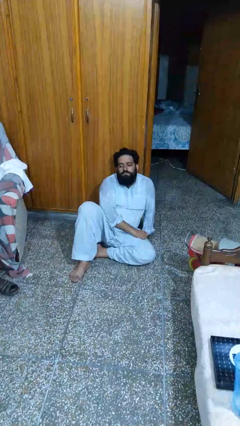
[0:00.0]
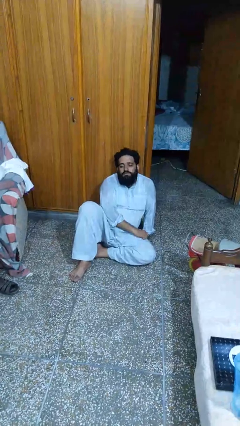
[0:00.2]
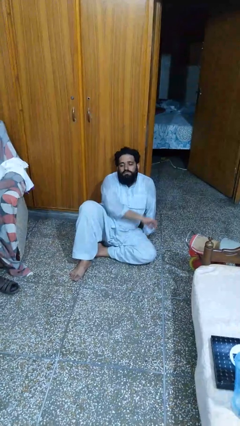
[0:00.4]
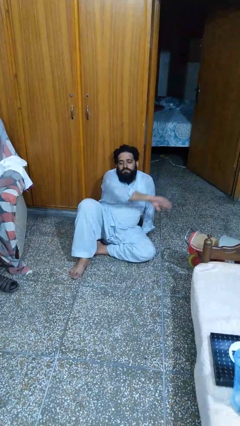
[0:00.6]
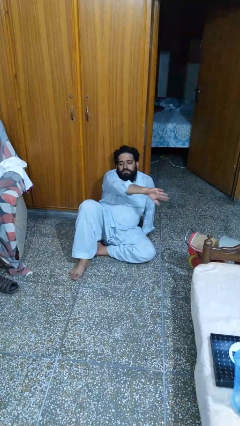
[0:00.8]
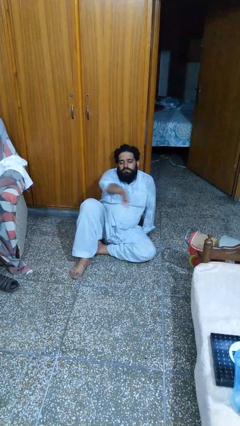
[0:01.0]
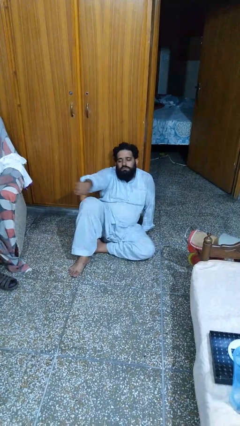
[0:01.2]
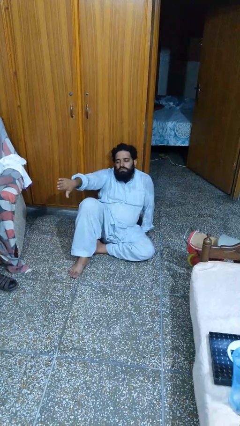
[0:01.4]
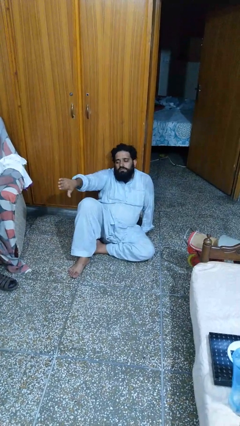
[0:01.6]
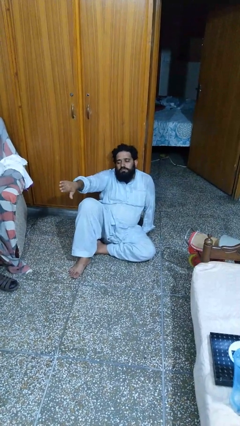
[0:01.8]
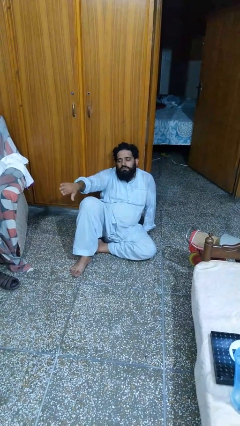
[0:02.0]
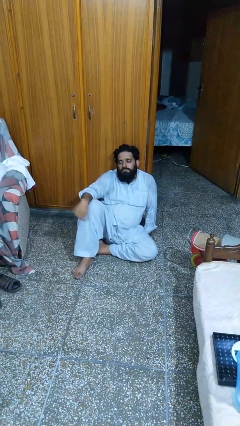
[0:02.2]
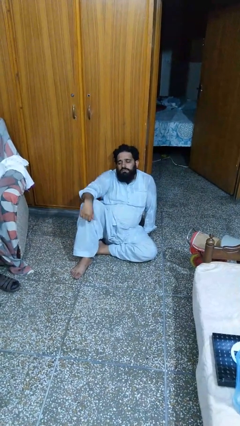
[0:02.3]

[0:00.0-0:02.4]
person gestures swipe right

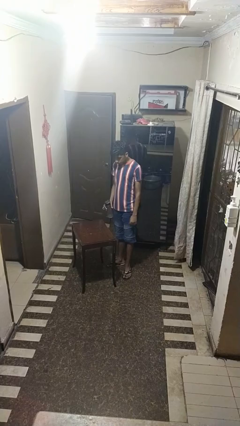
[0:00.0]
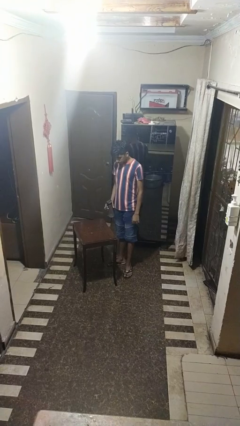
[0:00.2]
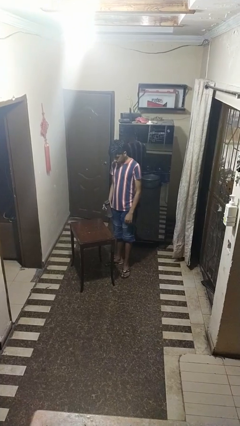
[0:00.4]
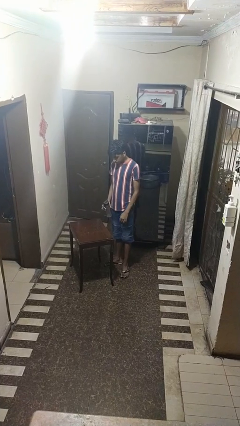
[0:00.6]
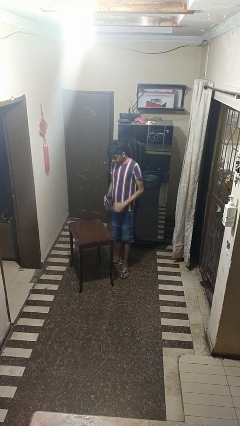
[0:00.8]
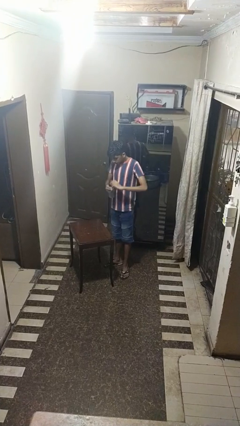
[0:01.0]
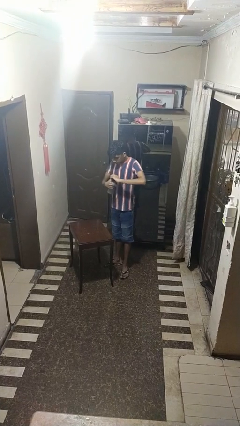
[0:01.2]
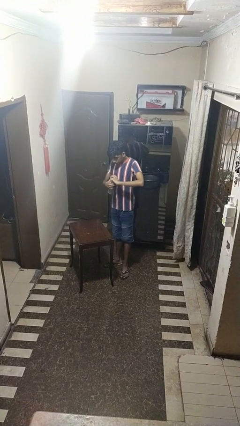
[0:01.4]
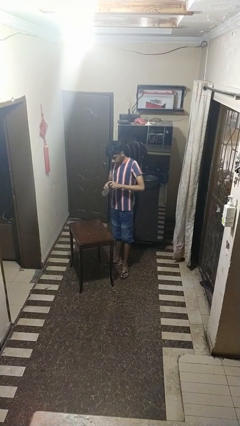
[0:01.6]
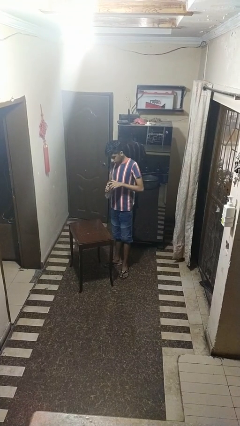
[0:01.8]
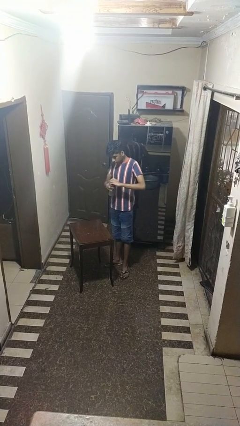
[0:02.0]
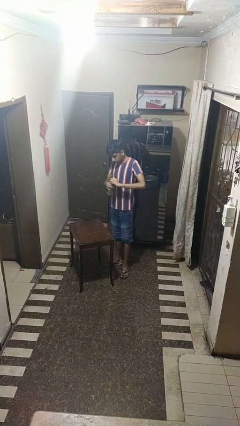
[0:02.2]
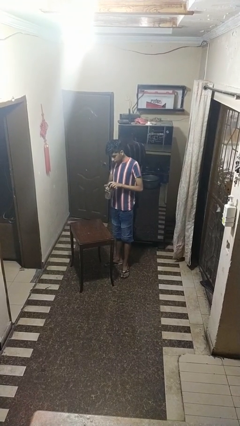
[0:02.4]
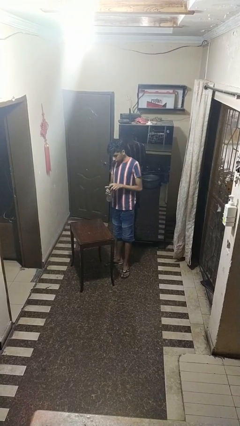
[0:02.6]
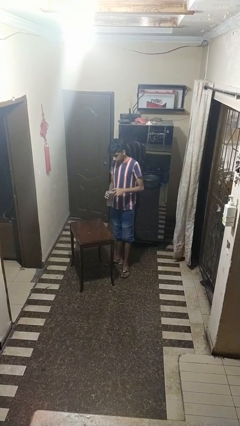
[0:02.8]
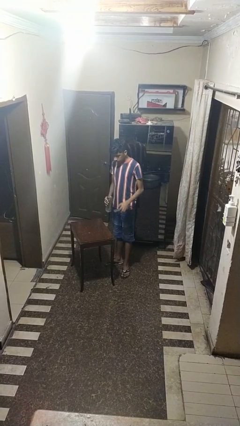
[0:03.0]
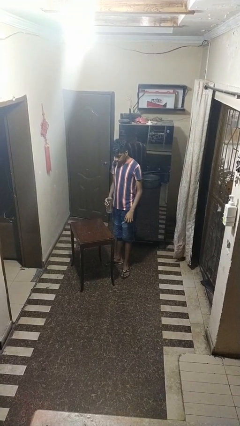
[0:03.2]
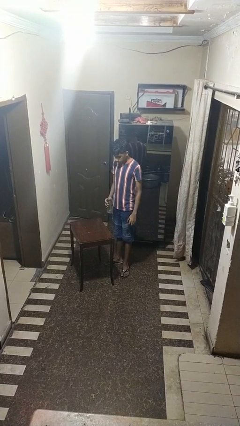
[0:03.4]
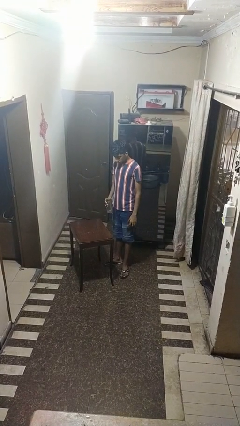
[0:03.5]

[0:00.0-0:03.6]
person unscrews lid from bottle

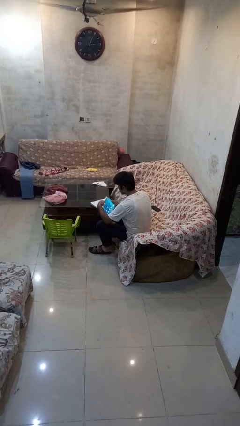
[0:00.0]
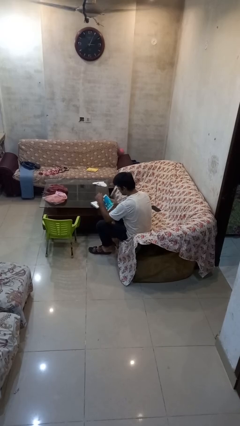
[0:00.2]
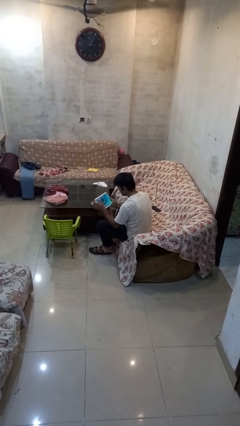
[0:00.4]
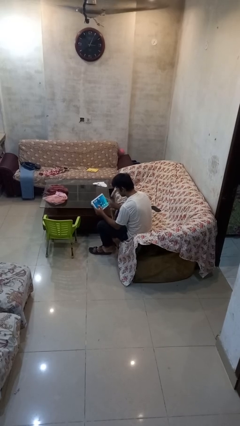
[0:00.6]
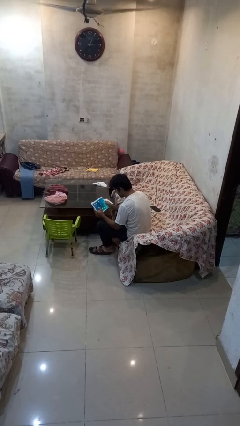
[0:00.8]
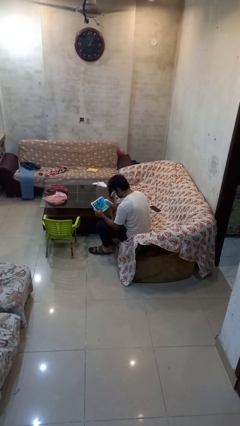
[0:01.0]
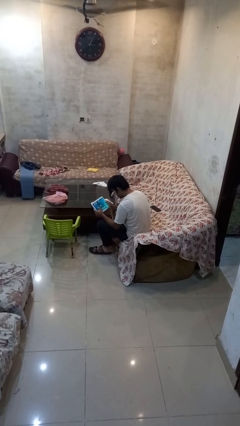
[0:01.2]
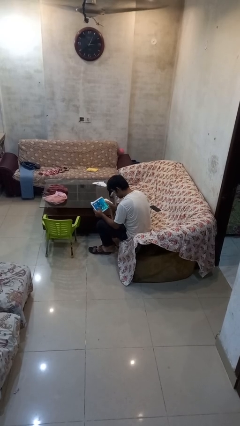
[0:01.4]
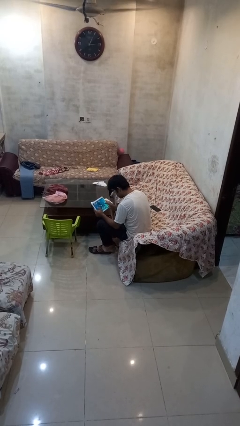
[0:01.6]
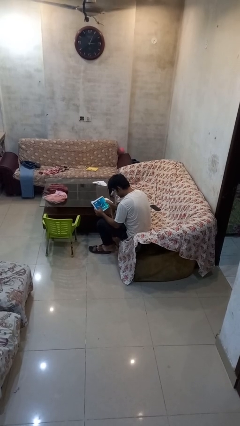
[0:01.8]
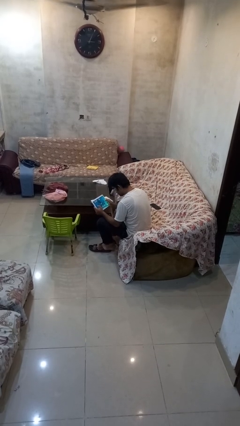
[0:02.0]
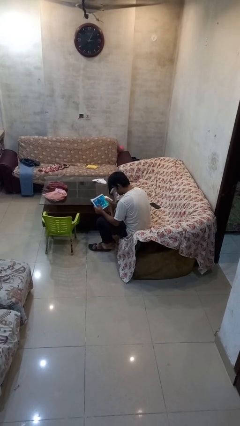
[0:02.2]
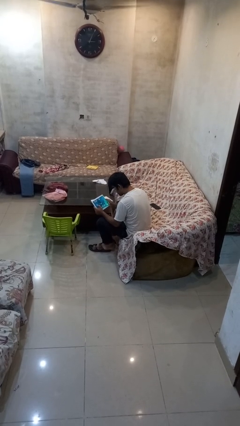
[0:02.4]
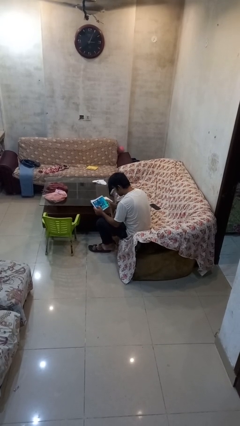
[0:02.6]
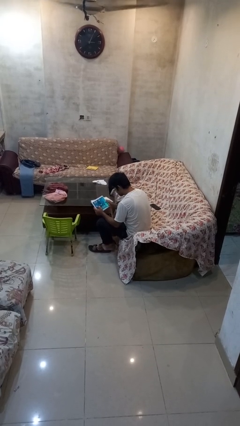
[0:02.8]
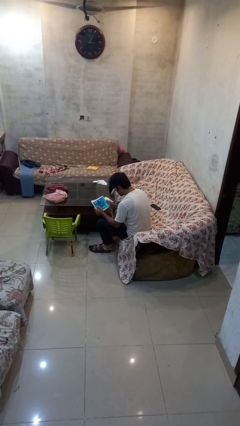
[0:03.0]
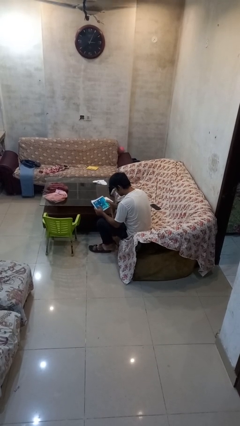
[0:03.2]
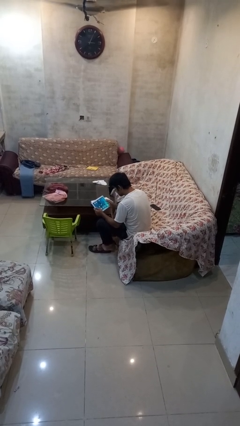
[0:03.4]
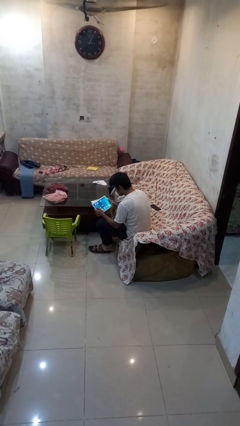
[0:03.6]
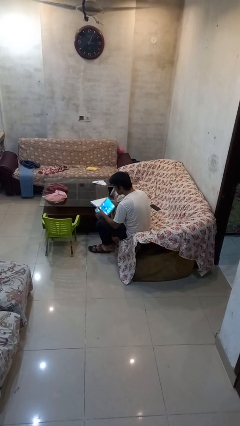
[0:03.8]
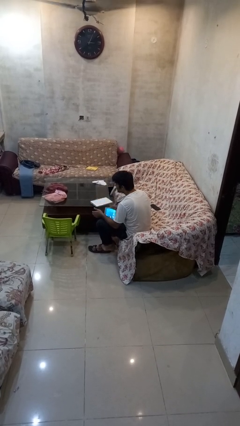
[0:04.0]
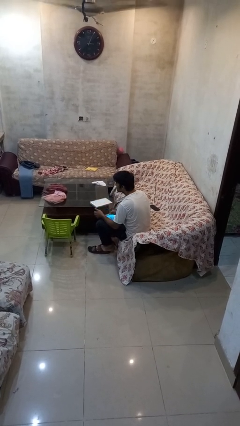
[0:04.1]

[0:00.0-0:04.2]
person interacts with tablet

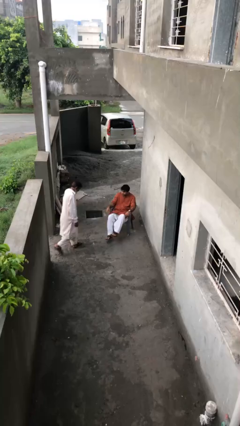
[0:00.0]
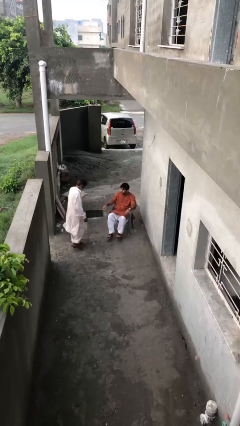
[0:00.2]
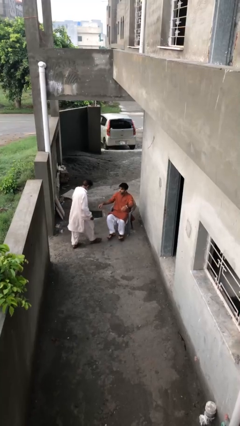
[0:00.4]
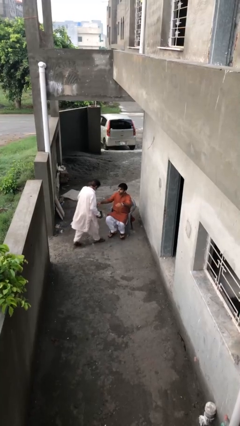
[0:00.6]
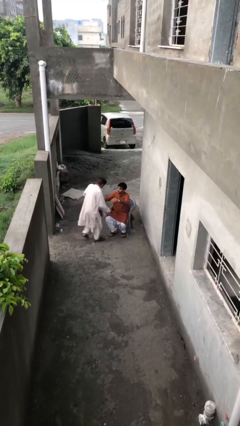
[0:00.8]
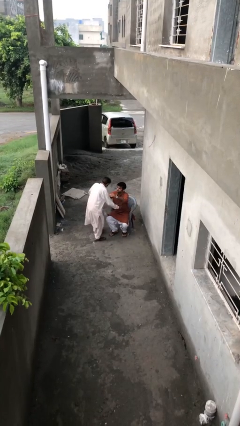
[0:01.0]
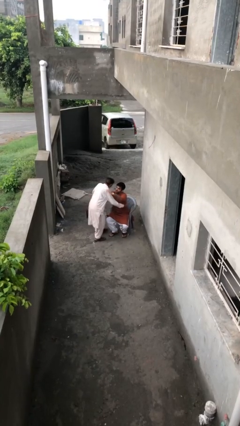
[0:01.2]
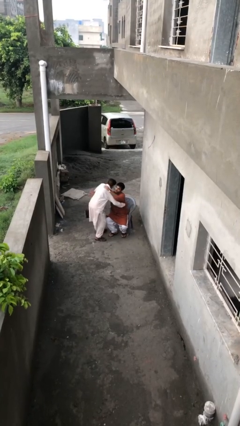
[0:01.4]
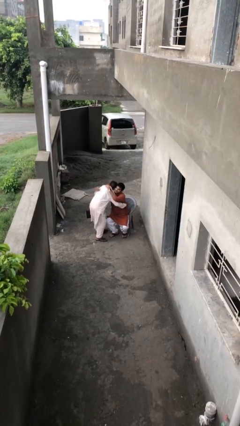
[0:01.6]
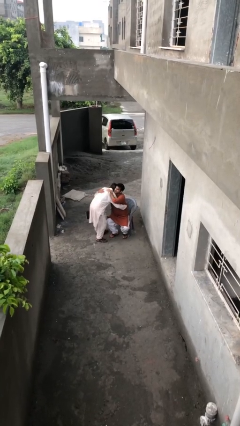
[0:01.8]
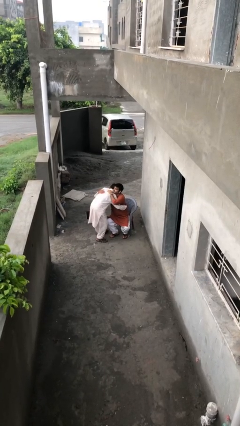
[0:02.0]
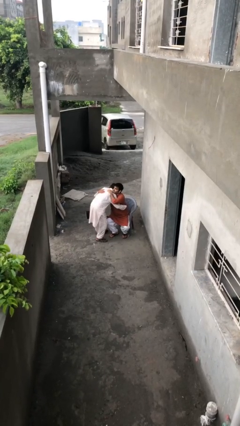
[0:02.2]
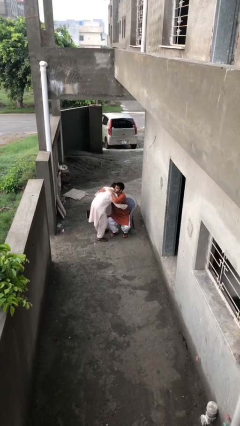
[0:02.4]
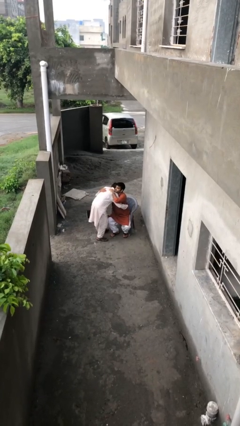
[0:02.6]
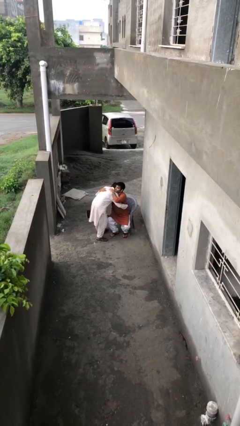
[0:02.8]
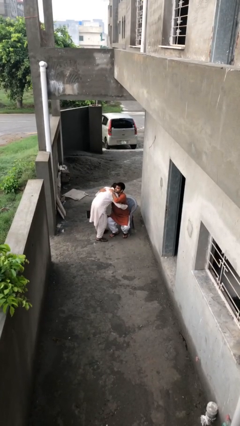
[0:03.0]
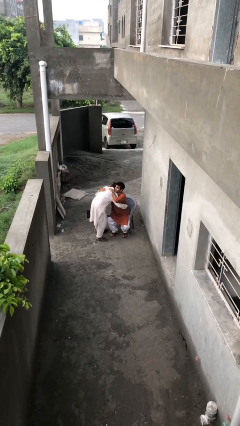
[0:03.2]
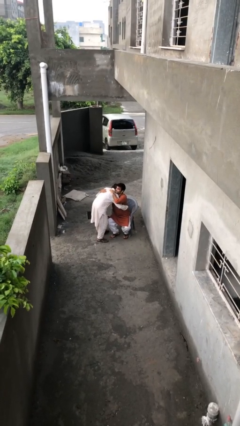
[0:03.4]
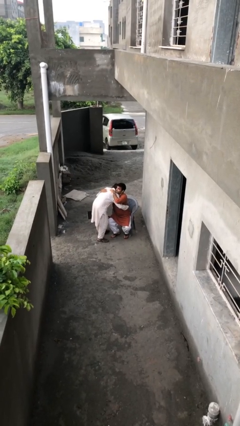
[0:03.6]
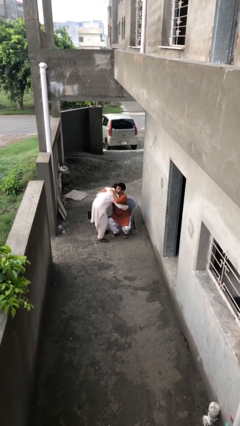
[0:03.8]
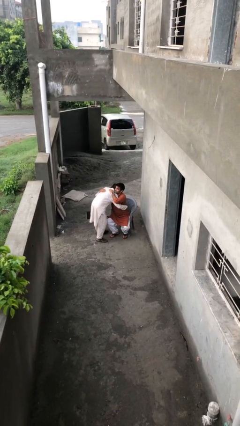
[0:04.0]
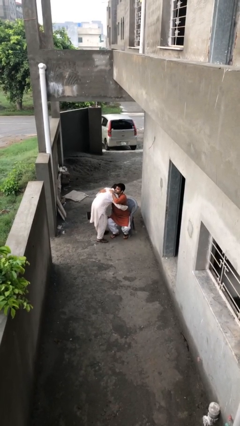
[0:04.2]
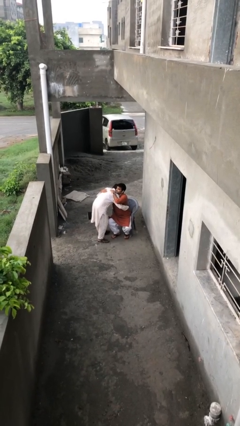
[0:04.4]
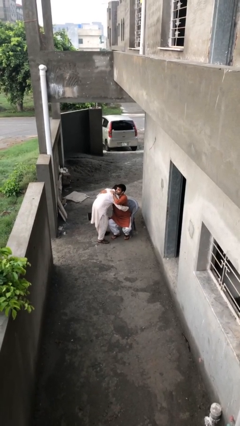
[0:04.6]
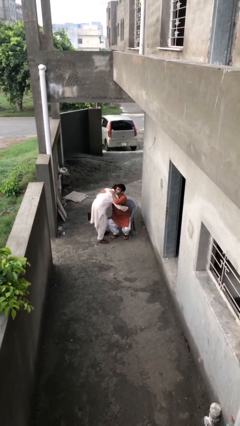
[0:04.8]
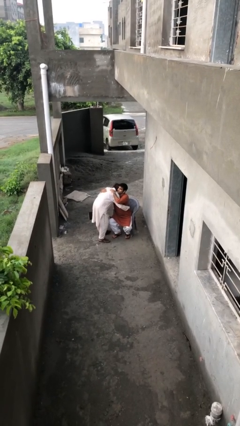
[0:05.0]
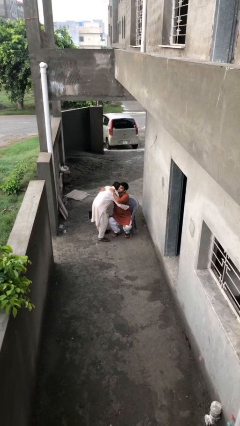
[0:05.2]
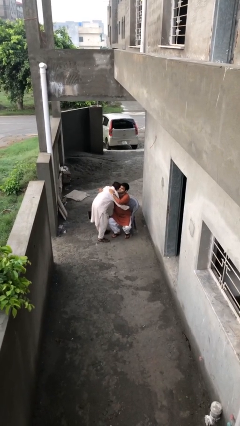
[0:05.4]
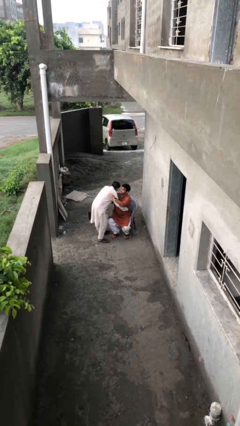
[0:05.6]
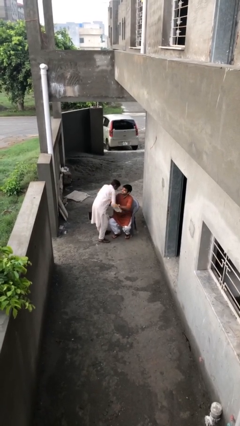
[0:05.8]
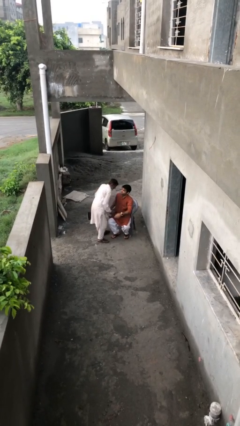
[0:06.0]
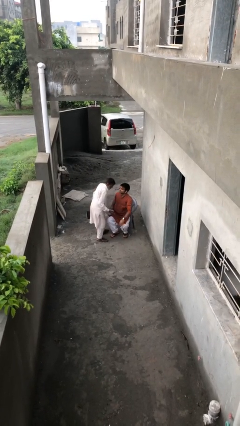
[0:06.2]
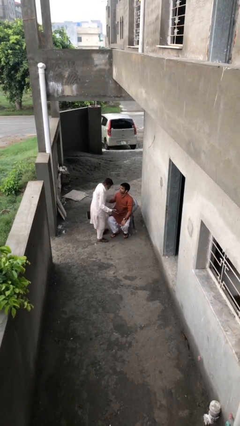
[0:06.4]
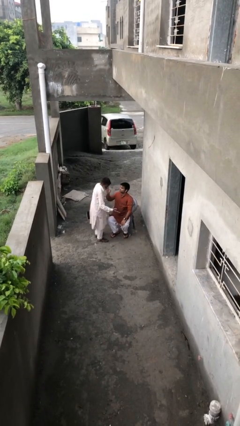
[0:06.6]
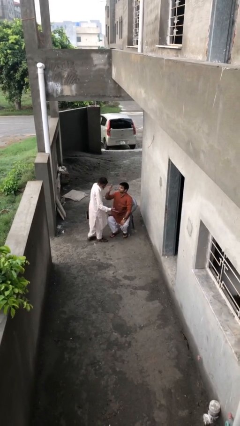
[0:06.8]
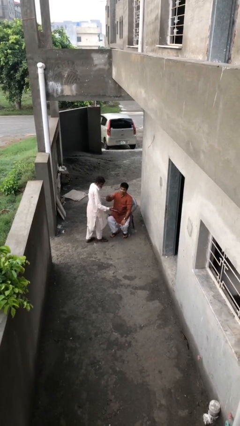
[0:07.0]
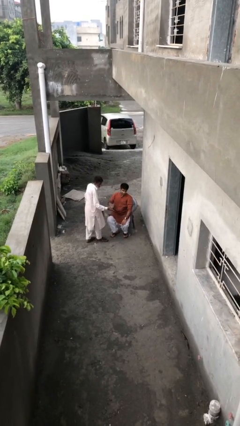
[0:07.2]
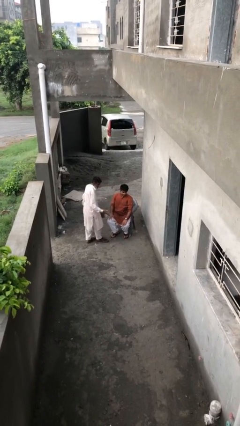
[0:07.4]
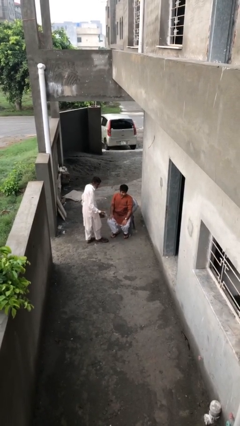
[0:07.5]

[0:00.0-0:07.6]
person embraces person
